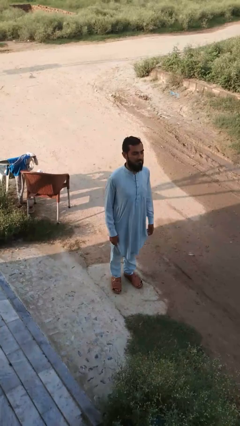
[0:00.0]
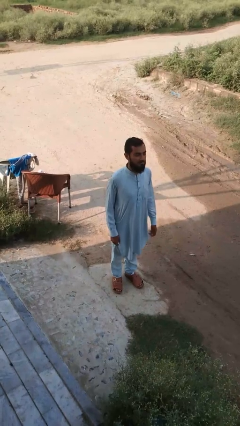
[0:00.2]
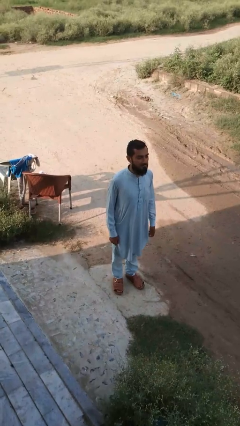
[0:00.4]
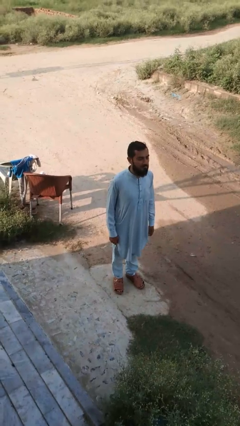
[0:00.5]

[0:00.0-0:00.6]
person jumps

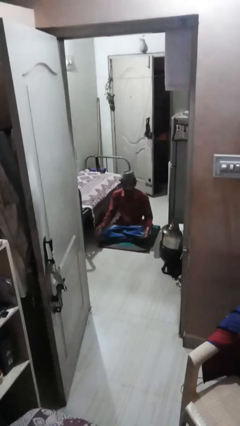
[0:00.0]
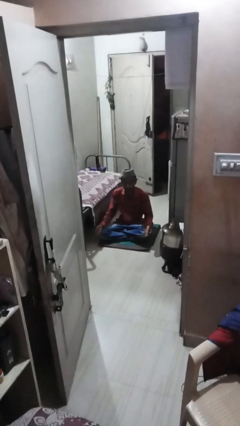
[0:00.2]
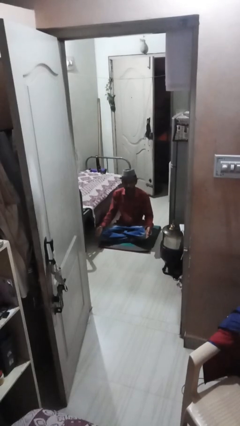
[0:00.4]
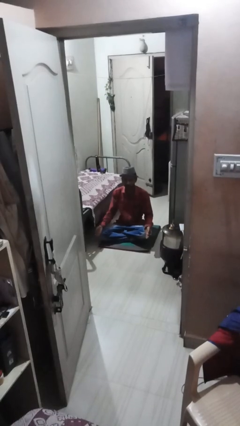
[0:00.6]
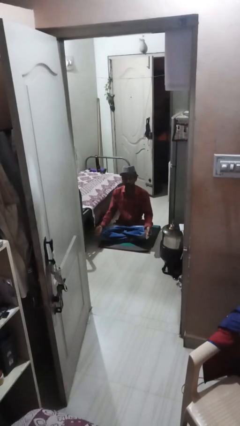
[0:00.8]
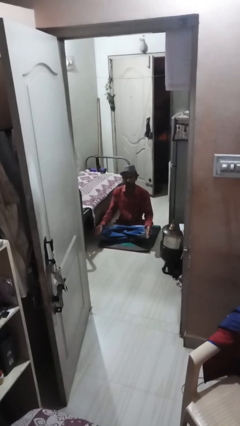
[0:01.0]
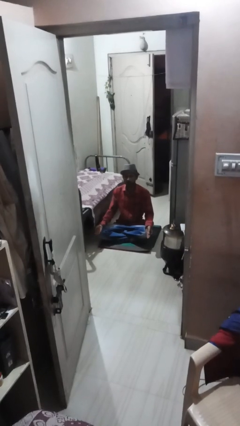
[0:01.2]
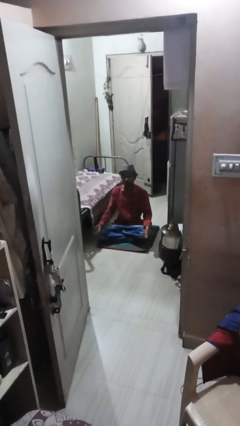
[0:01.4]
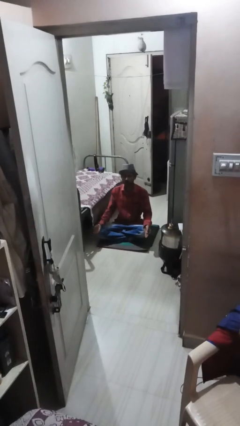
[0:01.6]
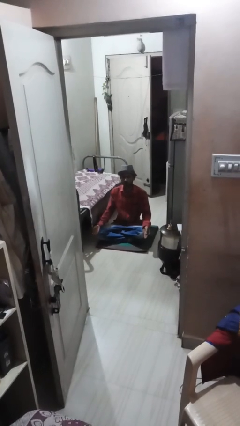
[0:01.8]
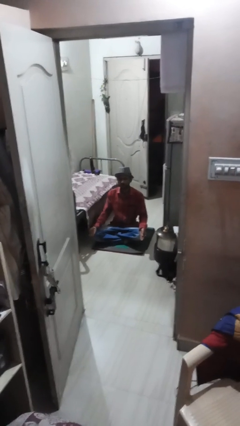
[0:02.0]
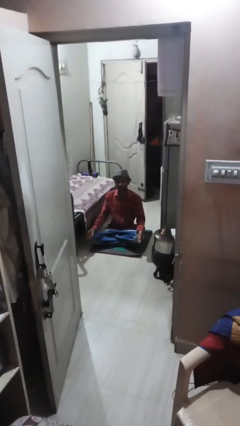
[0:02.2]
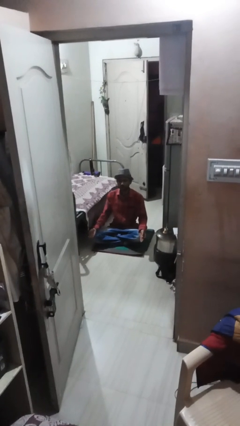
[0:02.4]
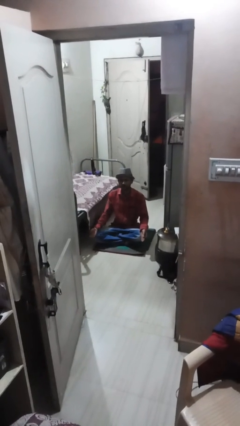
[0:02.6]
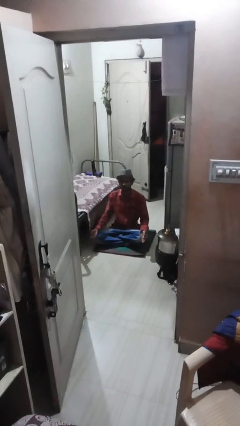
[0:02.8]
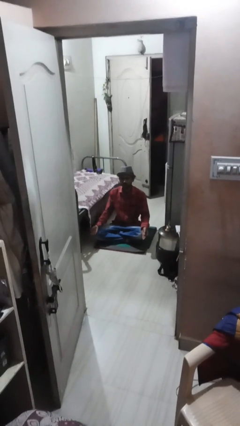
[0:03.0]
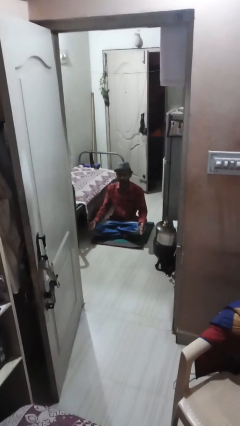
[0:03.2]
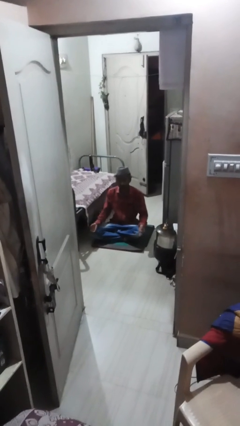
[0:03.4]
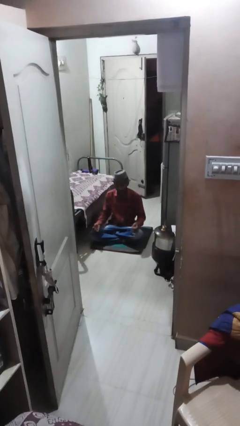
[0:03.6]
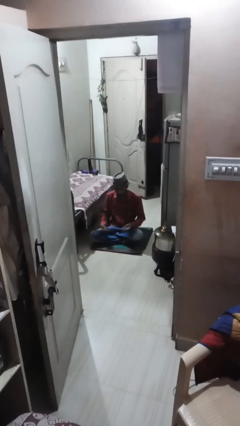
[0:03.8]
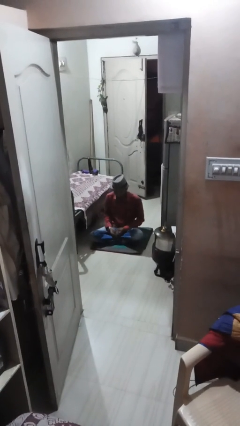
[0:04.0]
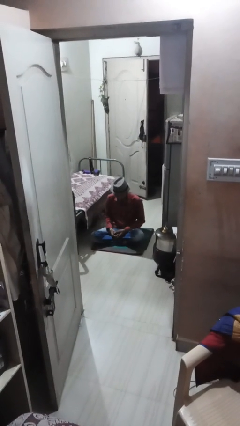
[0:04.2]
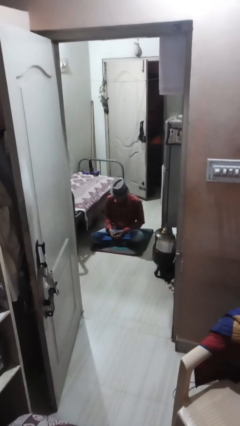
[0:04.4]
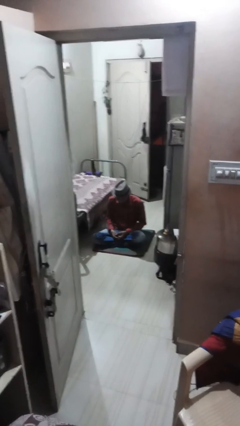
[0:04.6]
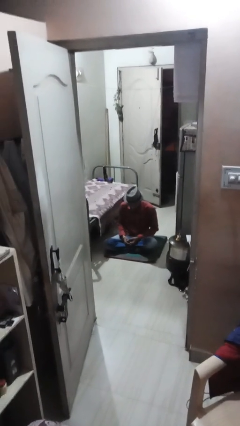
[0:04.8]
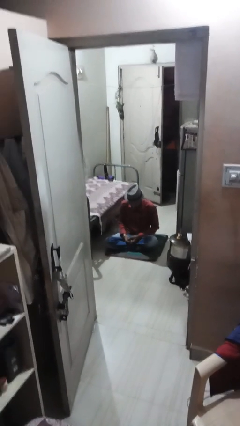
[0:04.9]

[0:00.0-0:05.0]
person prays

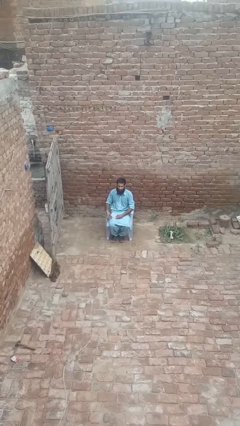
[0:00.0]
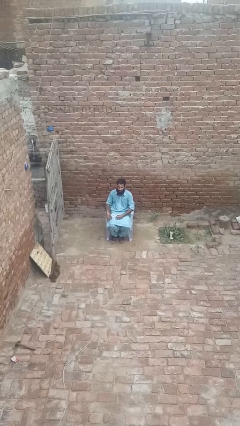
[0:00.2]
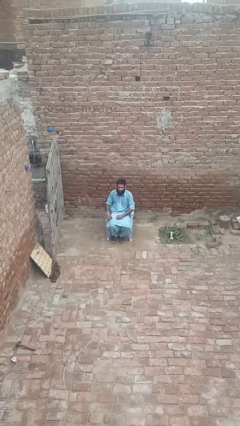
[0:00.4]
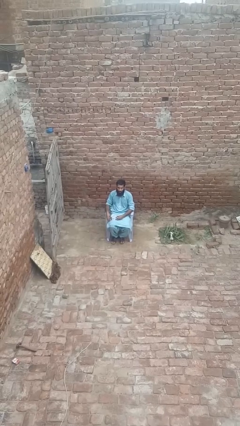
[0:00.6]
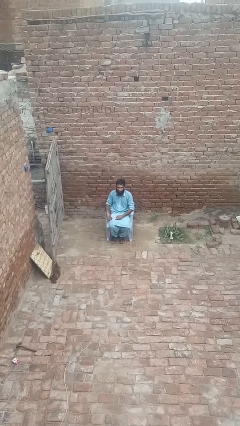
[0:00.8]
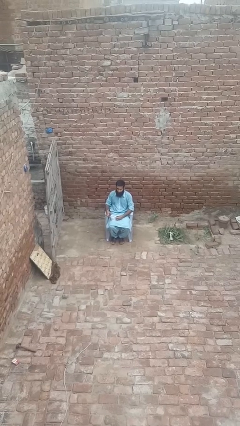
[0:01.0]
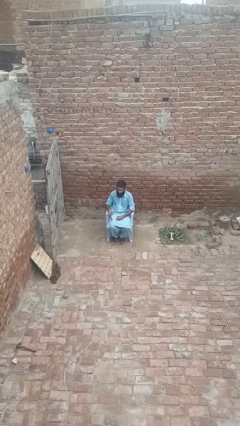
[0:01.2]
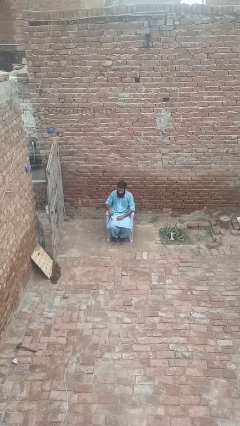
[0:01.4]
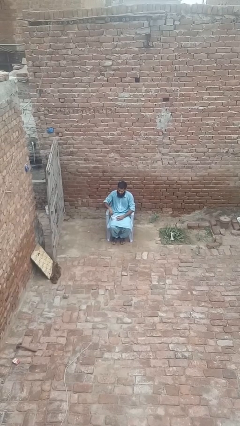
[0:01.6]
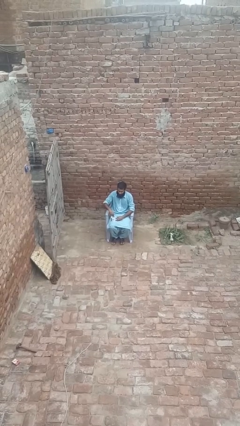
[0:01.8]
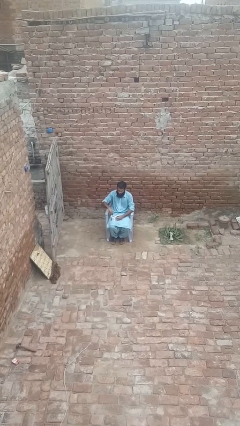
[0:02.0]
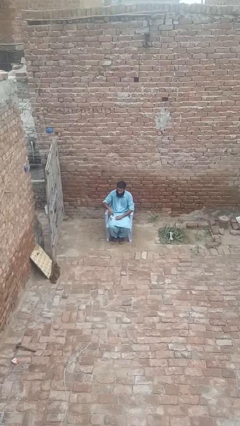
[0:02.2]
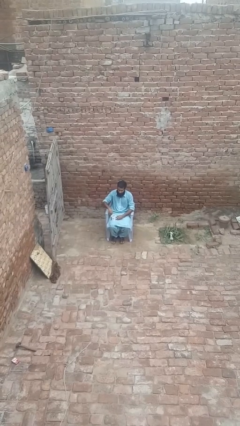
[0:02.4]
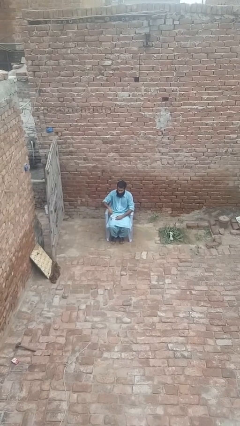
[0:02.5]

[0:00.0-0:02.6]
person stirs mug

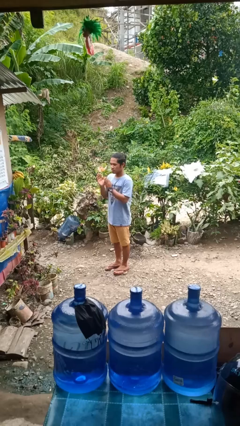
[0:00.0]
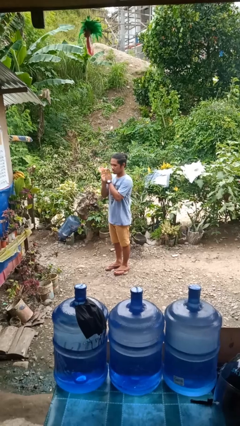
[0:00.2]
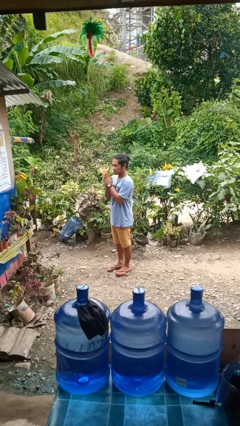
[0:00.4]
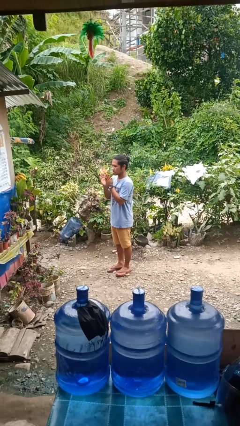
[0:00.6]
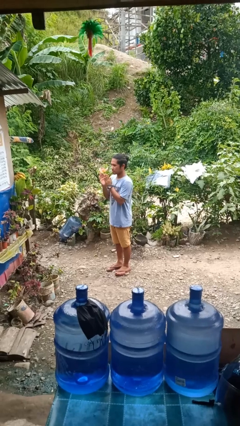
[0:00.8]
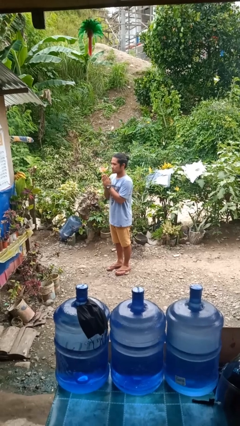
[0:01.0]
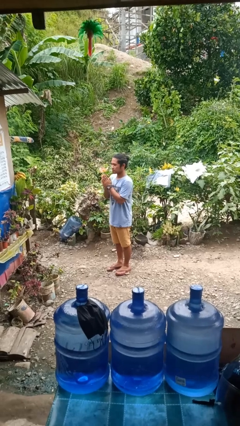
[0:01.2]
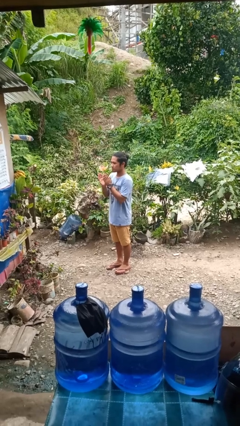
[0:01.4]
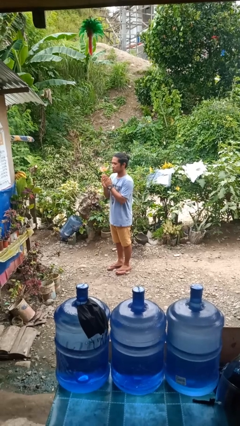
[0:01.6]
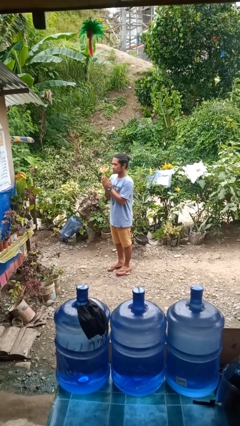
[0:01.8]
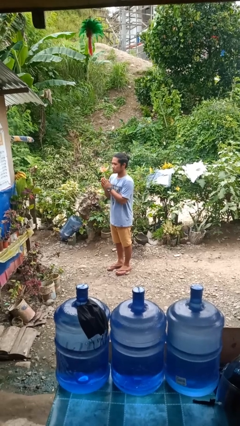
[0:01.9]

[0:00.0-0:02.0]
person claps hands

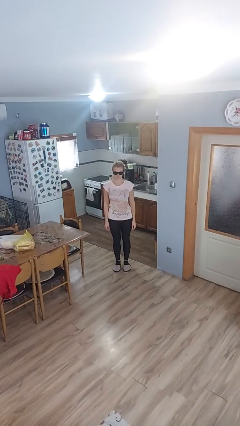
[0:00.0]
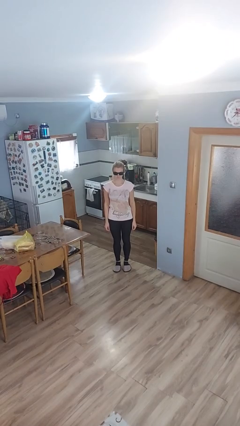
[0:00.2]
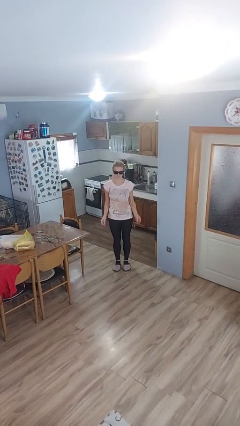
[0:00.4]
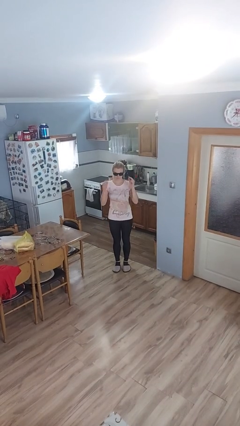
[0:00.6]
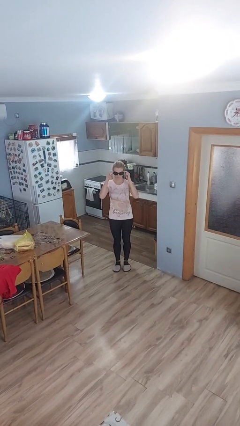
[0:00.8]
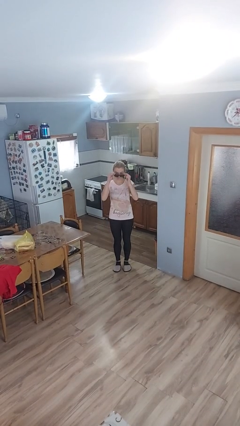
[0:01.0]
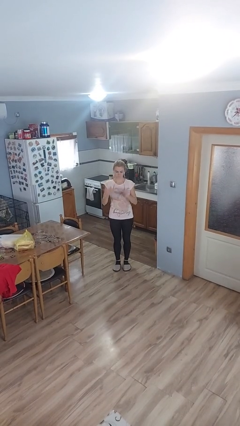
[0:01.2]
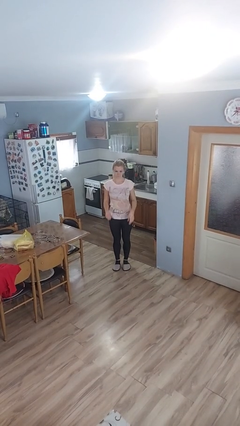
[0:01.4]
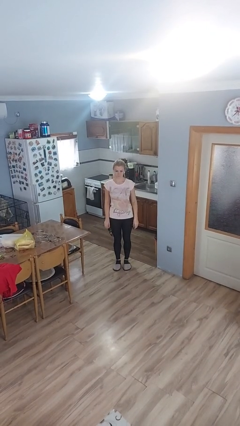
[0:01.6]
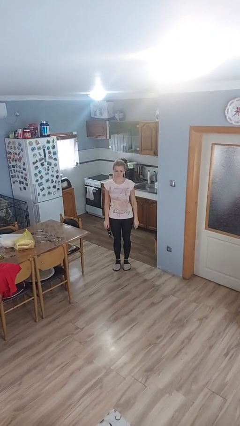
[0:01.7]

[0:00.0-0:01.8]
person takes off sunglasses

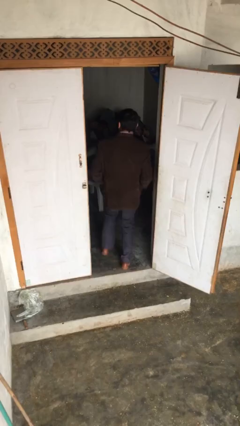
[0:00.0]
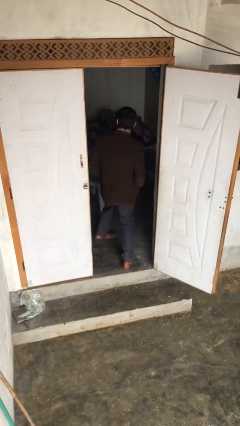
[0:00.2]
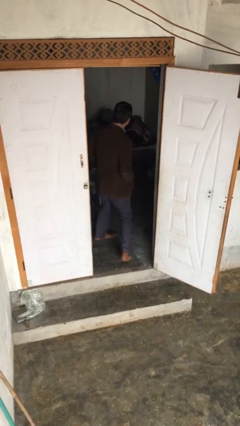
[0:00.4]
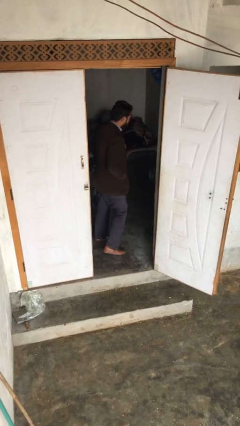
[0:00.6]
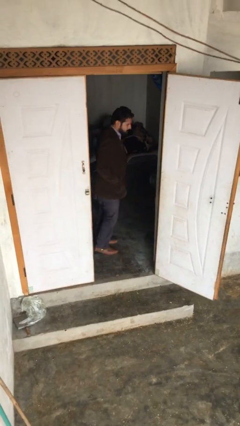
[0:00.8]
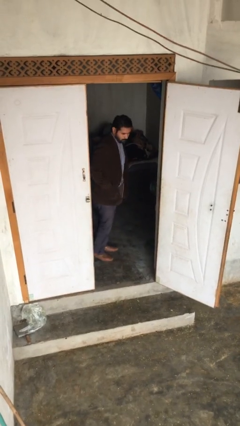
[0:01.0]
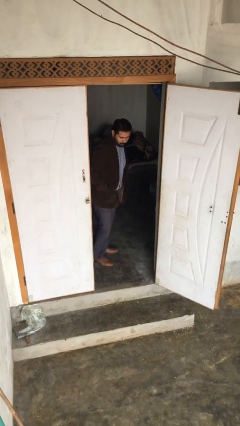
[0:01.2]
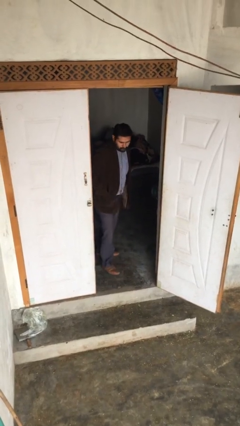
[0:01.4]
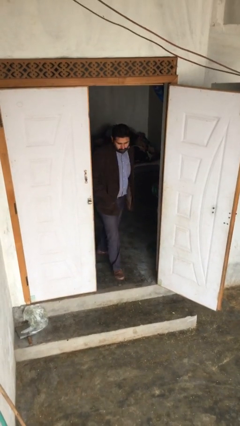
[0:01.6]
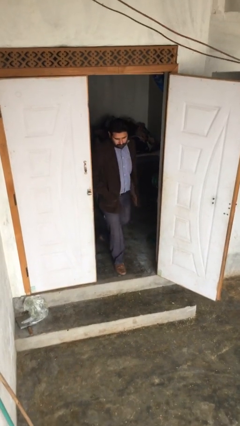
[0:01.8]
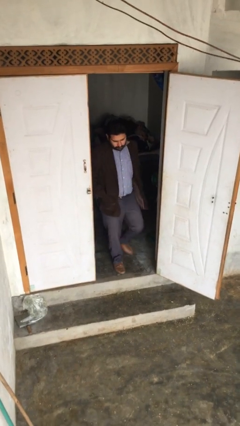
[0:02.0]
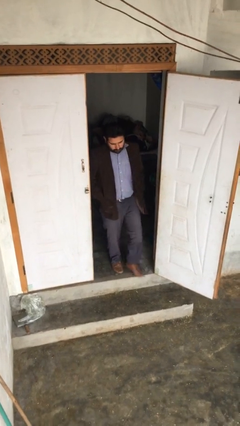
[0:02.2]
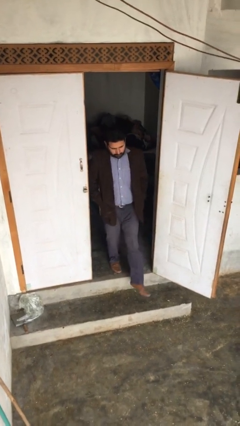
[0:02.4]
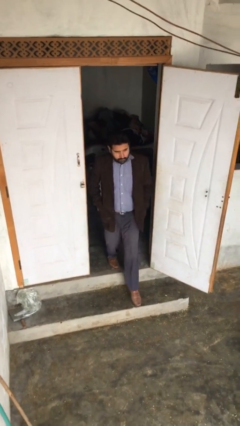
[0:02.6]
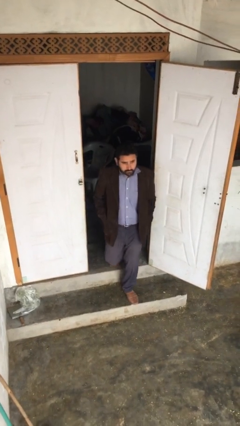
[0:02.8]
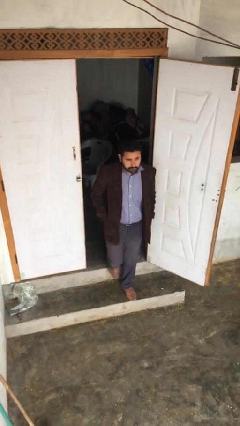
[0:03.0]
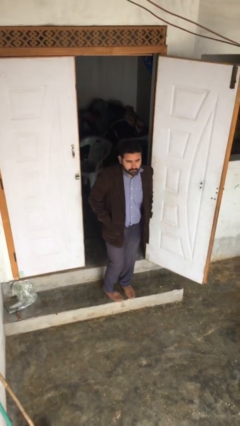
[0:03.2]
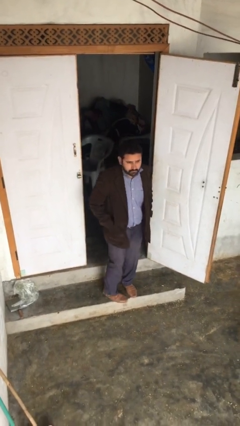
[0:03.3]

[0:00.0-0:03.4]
person enters scene through structure

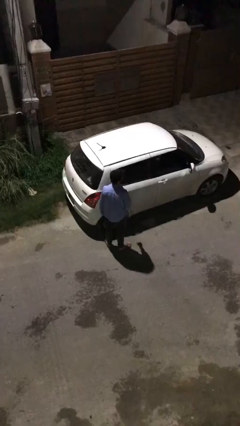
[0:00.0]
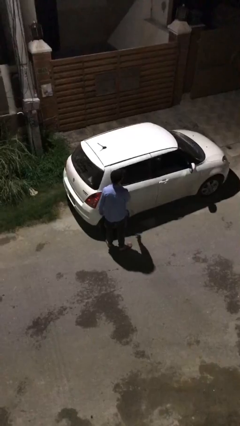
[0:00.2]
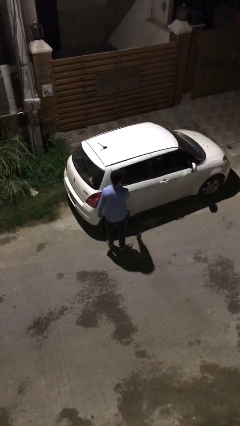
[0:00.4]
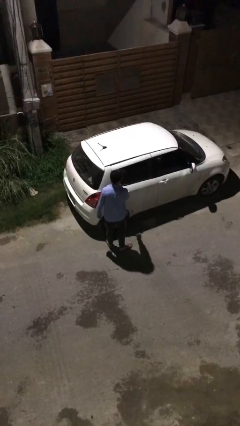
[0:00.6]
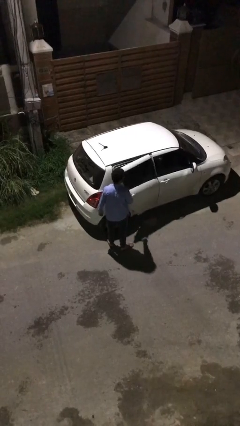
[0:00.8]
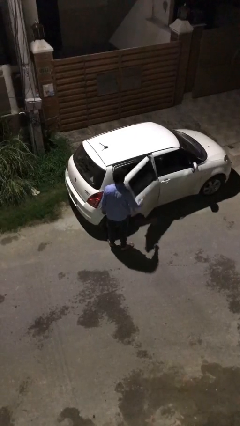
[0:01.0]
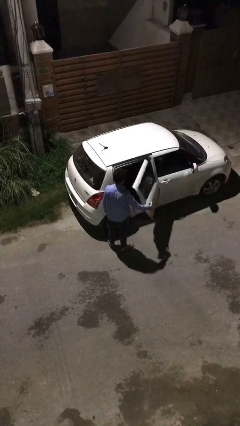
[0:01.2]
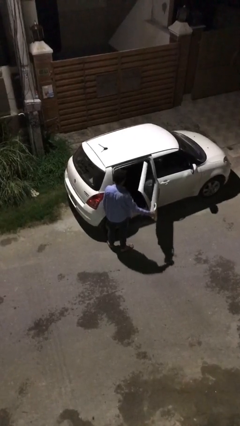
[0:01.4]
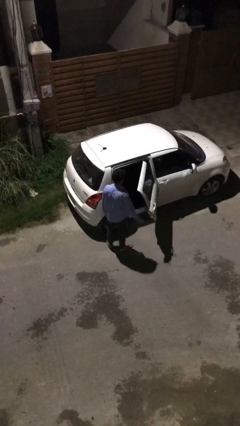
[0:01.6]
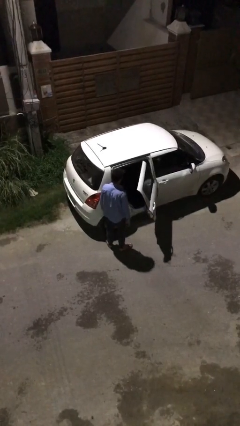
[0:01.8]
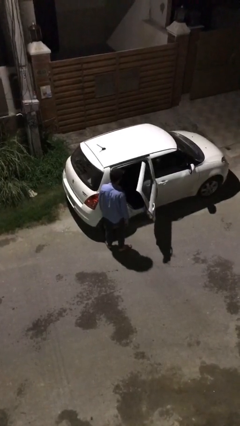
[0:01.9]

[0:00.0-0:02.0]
person opens car door
